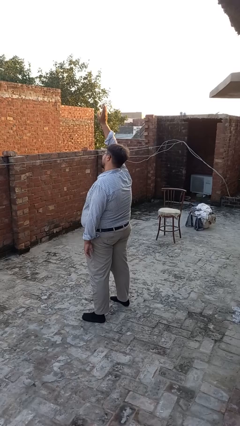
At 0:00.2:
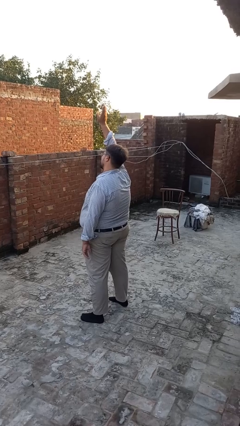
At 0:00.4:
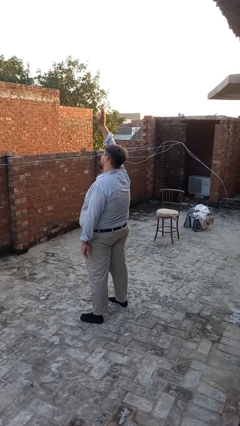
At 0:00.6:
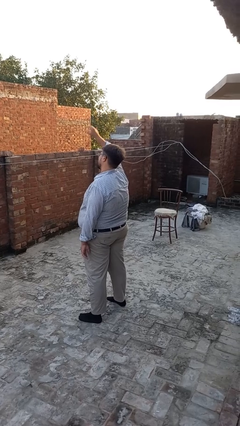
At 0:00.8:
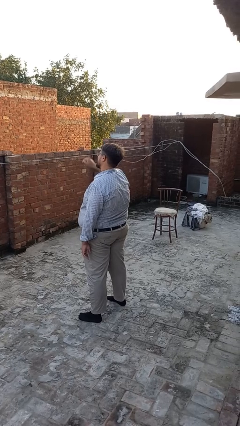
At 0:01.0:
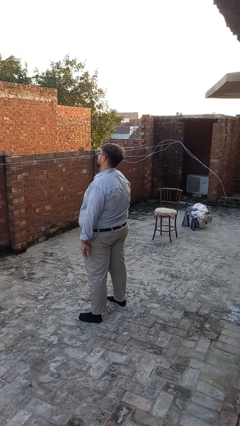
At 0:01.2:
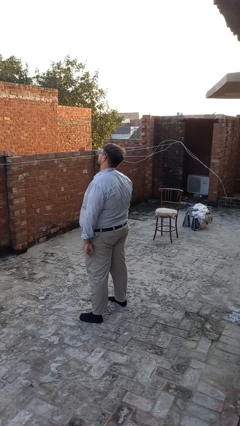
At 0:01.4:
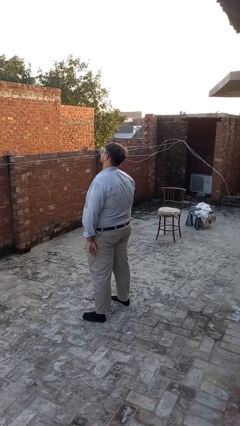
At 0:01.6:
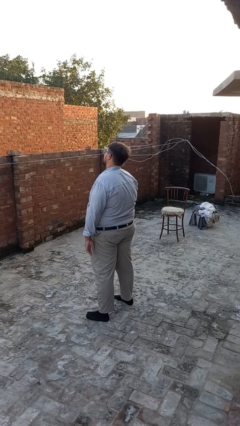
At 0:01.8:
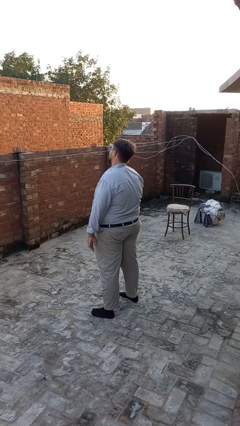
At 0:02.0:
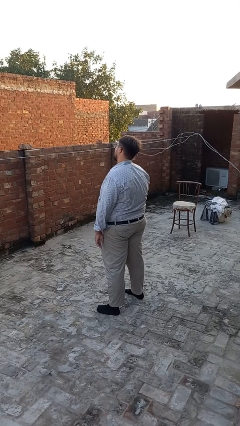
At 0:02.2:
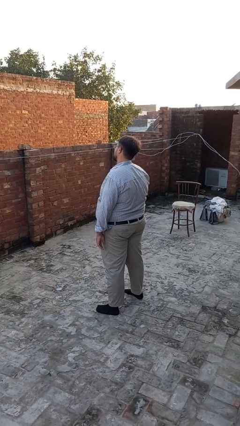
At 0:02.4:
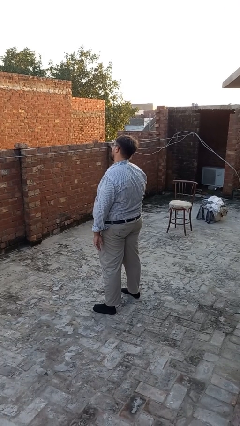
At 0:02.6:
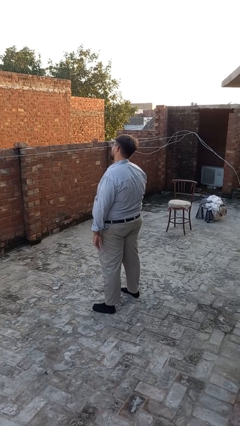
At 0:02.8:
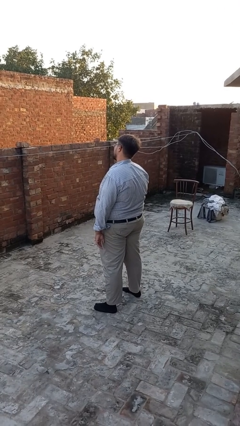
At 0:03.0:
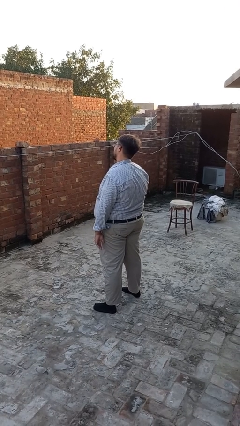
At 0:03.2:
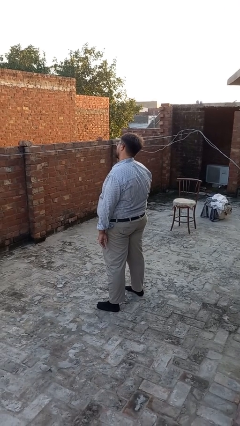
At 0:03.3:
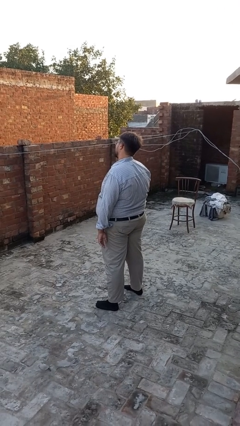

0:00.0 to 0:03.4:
person gestures lower hand

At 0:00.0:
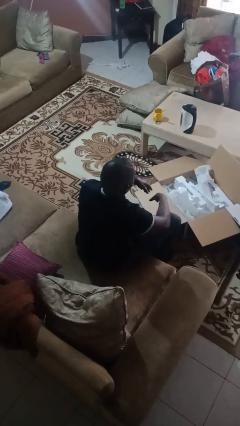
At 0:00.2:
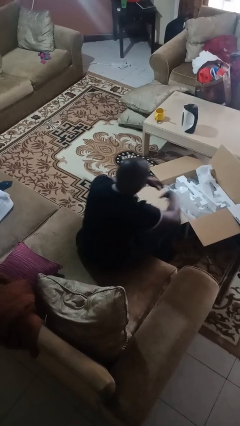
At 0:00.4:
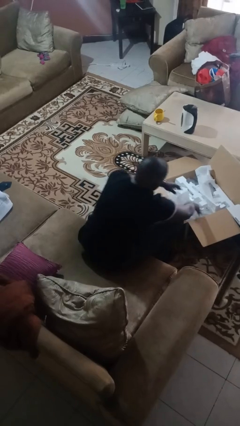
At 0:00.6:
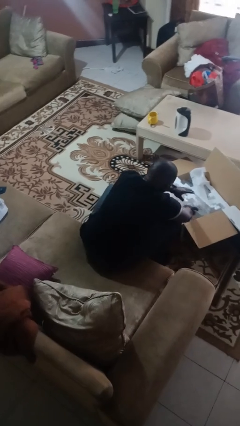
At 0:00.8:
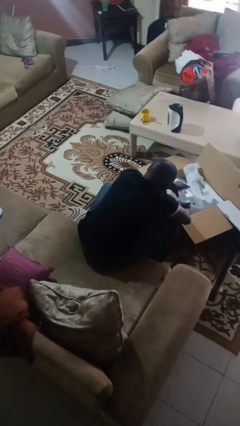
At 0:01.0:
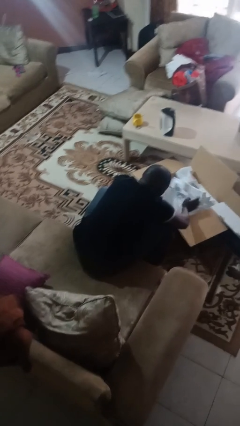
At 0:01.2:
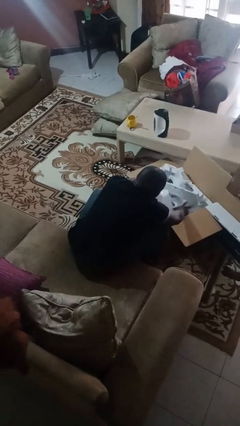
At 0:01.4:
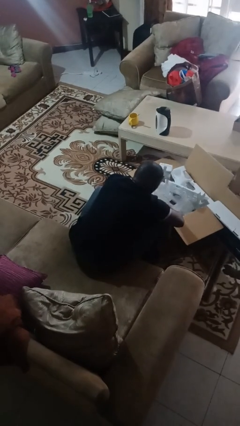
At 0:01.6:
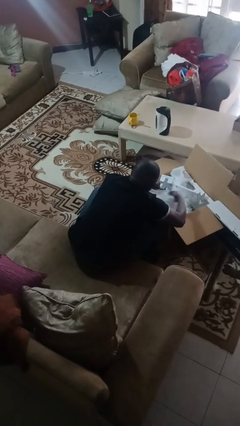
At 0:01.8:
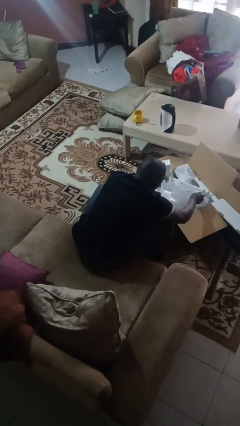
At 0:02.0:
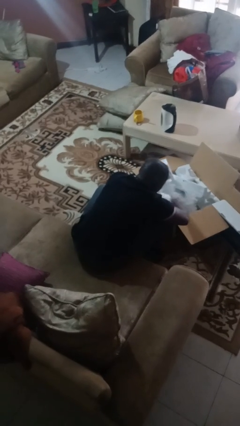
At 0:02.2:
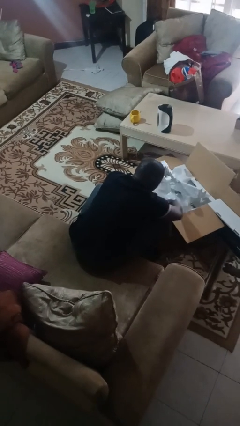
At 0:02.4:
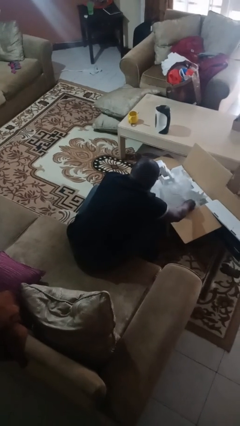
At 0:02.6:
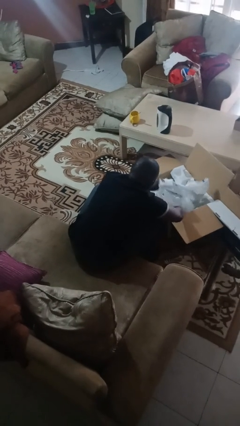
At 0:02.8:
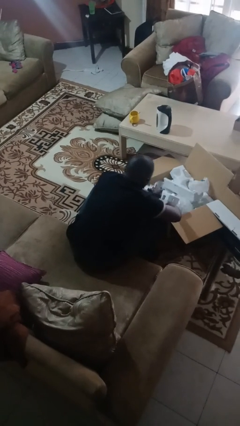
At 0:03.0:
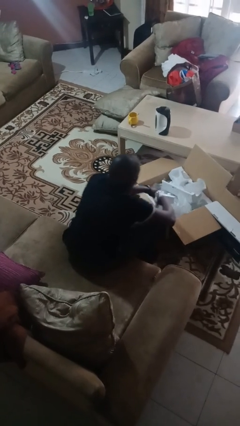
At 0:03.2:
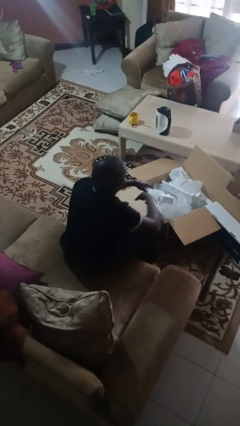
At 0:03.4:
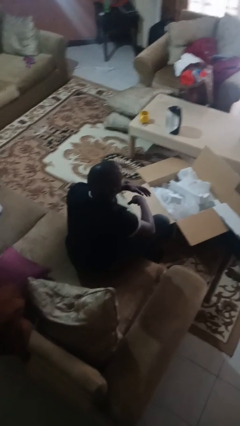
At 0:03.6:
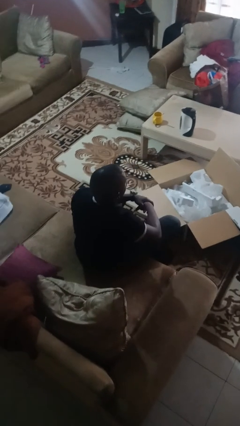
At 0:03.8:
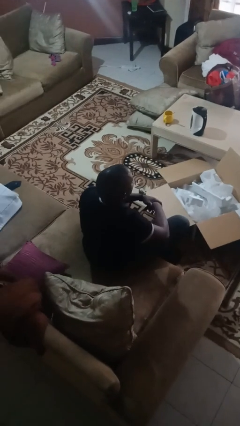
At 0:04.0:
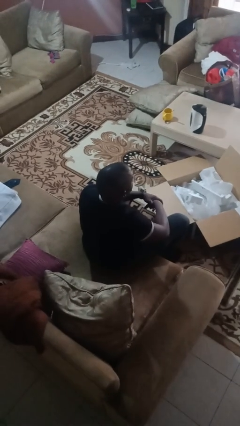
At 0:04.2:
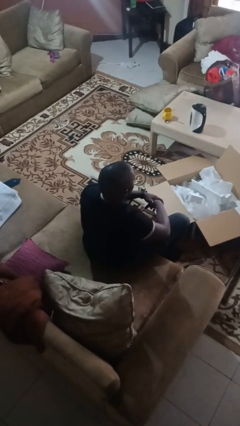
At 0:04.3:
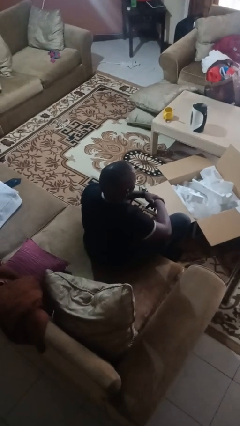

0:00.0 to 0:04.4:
person searches in box

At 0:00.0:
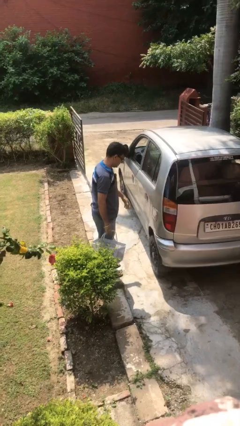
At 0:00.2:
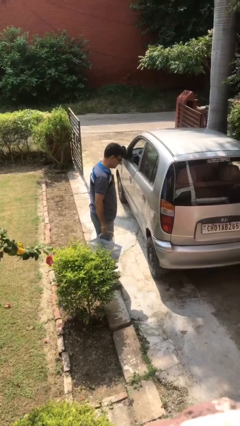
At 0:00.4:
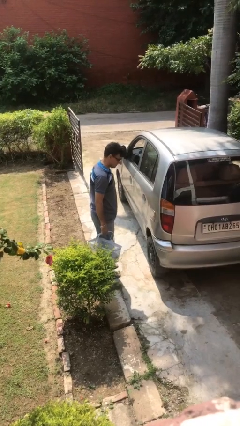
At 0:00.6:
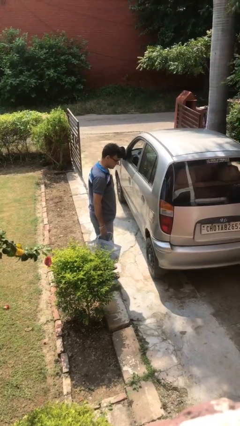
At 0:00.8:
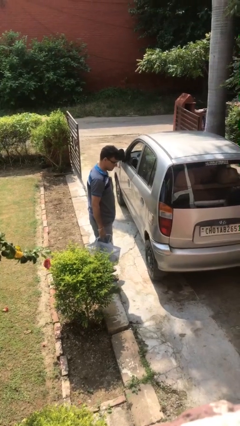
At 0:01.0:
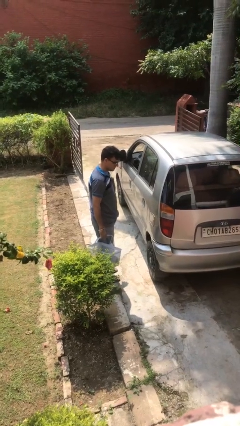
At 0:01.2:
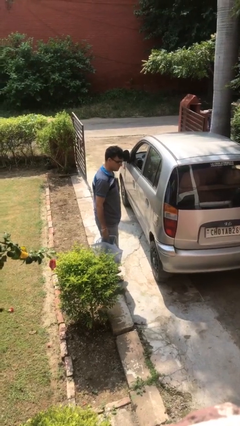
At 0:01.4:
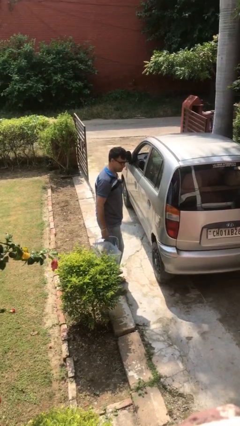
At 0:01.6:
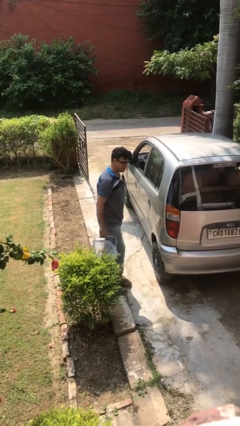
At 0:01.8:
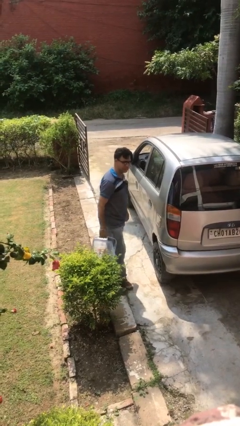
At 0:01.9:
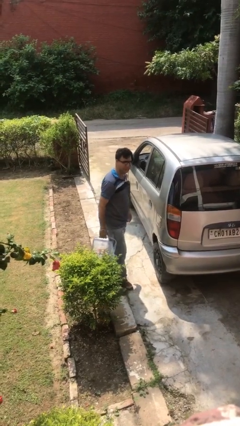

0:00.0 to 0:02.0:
person closes car door

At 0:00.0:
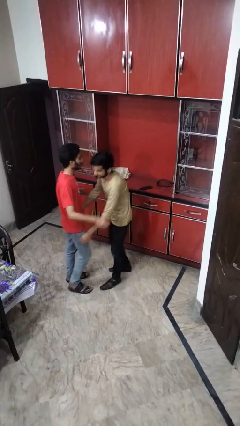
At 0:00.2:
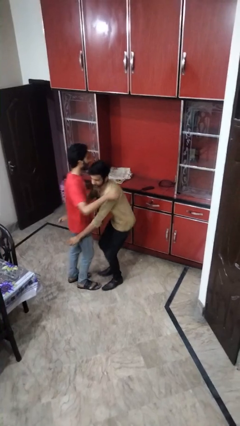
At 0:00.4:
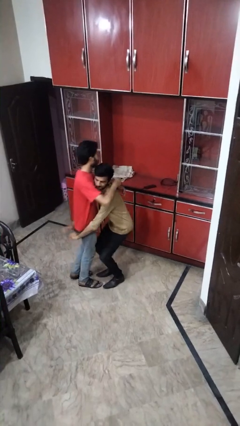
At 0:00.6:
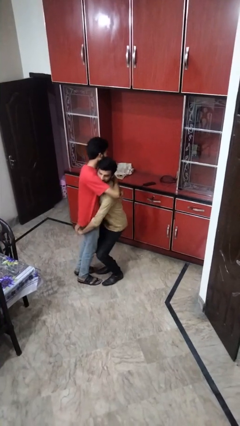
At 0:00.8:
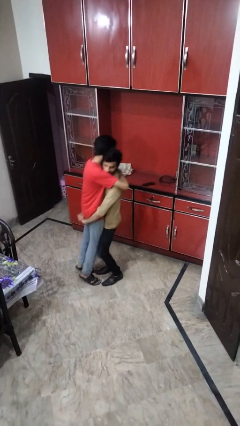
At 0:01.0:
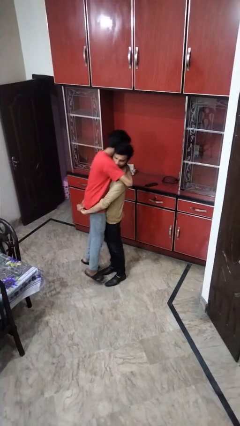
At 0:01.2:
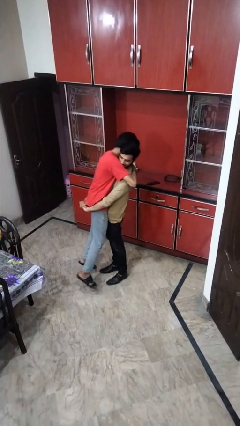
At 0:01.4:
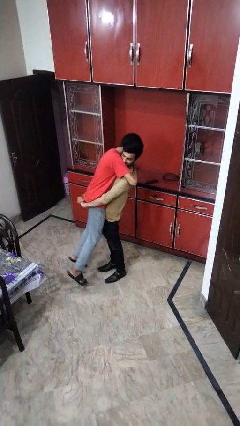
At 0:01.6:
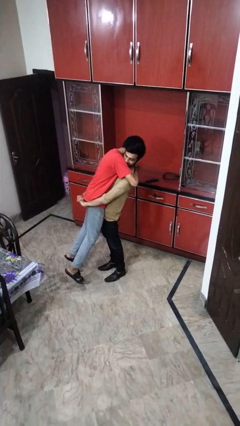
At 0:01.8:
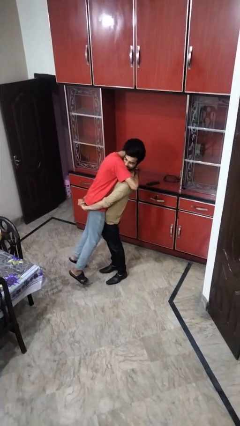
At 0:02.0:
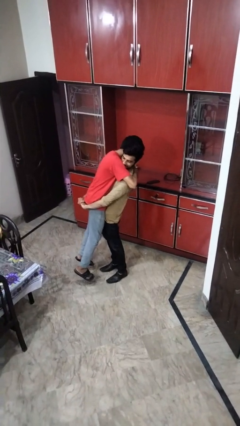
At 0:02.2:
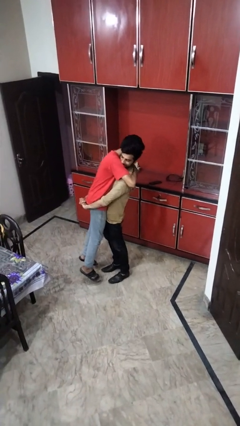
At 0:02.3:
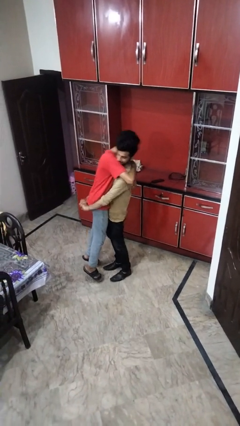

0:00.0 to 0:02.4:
person picks up person

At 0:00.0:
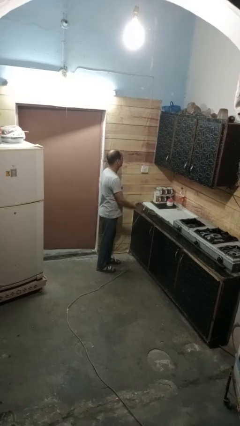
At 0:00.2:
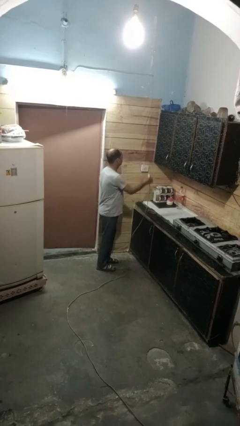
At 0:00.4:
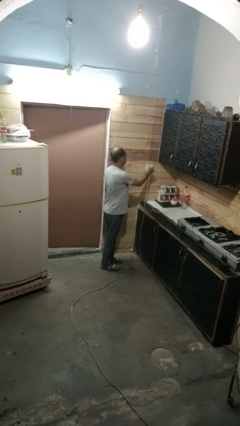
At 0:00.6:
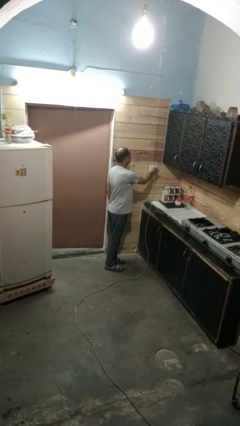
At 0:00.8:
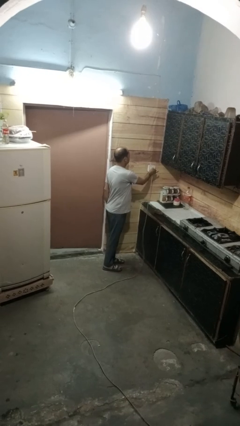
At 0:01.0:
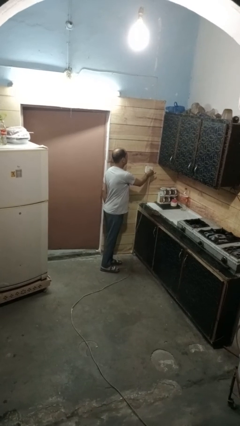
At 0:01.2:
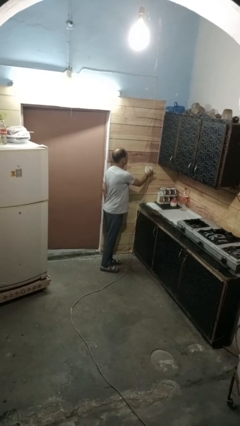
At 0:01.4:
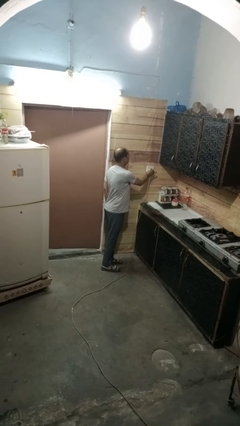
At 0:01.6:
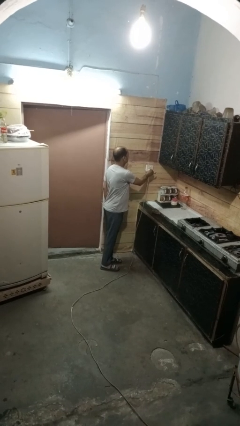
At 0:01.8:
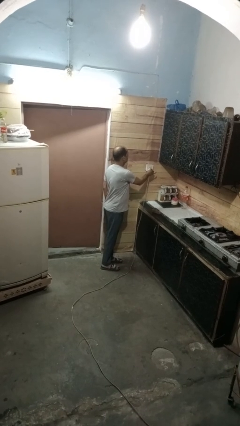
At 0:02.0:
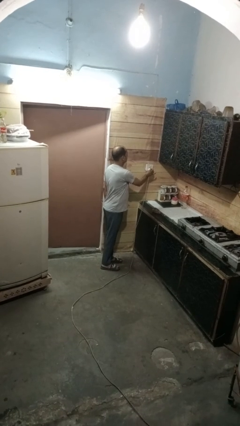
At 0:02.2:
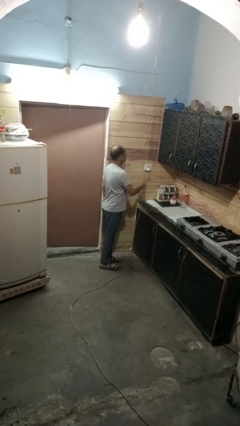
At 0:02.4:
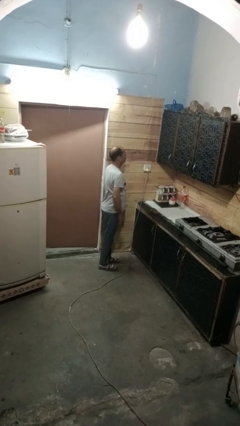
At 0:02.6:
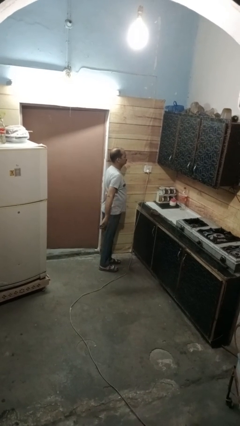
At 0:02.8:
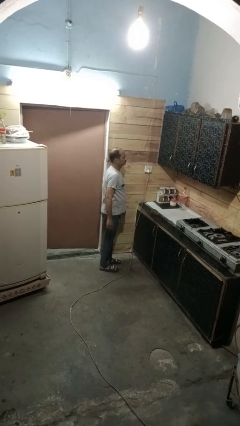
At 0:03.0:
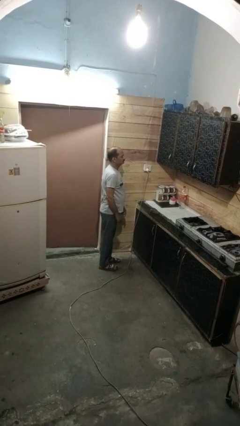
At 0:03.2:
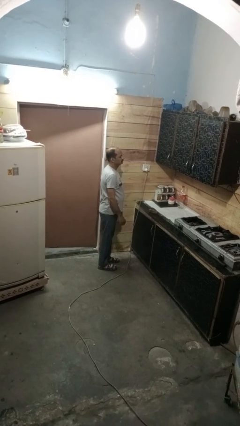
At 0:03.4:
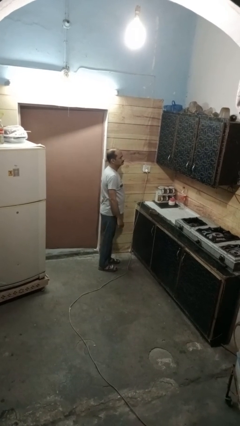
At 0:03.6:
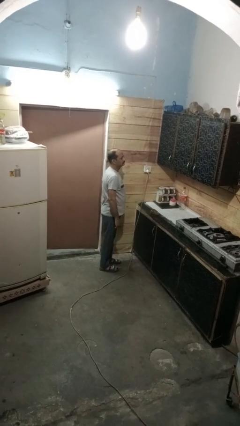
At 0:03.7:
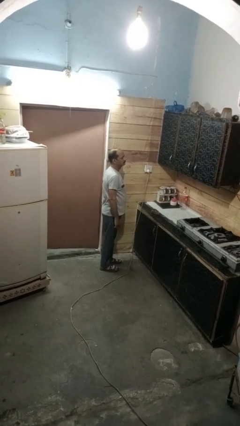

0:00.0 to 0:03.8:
person plugs into electrical socket

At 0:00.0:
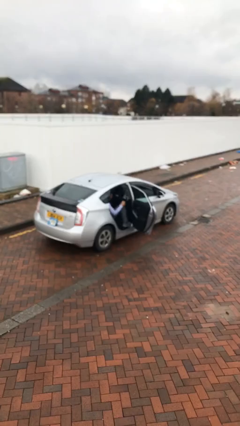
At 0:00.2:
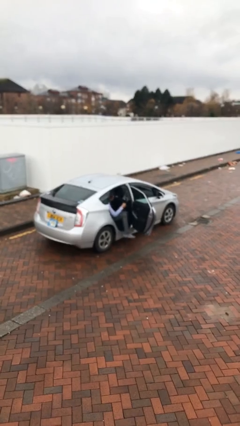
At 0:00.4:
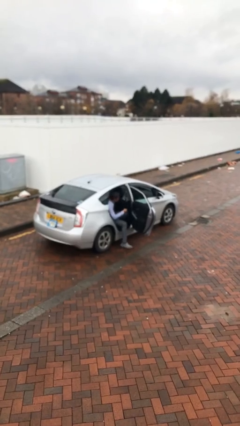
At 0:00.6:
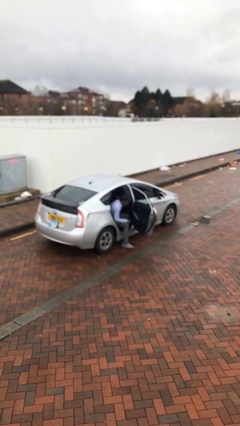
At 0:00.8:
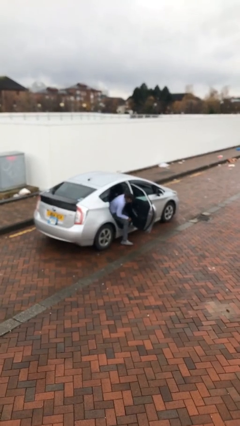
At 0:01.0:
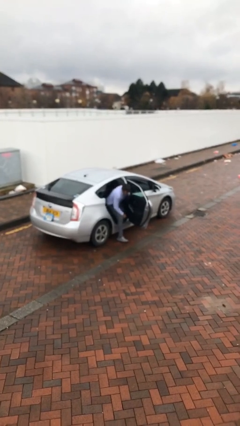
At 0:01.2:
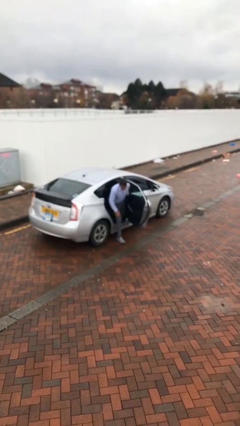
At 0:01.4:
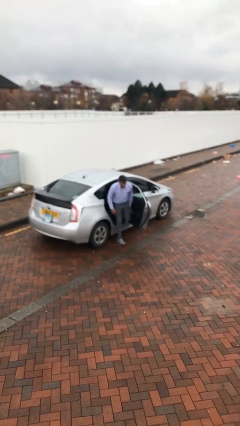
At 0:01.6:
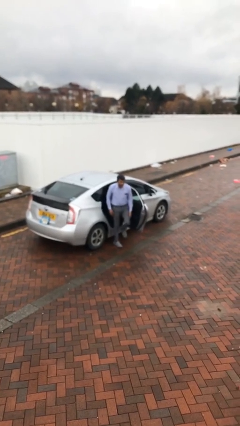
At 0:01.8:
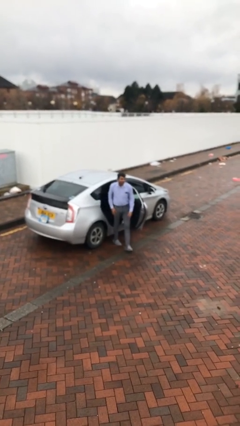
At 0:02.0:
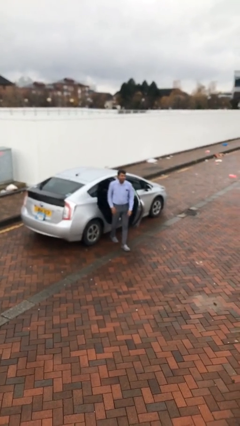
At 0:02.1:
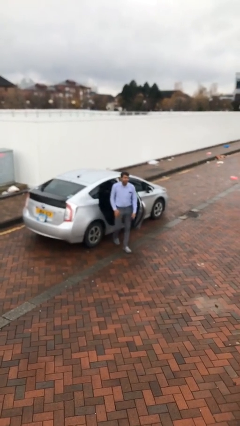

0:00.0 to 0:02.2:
person exits car
